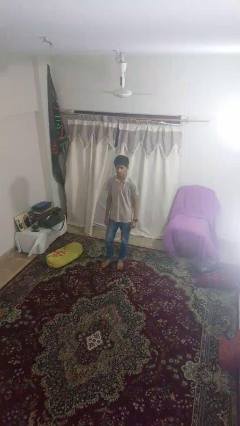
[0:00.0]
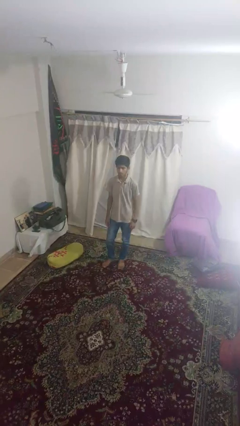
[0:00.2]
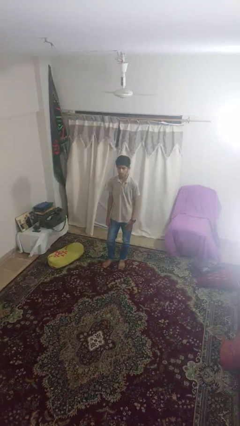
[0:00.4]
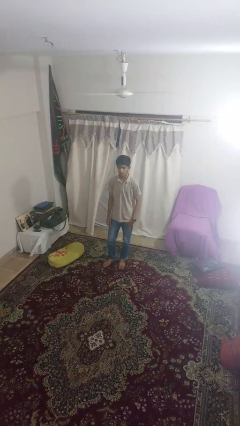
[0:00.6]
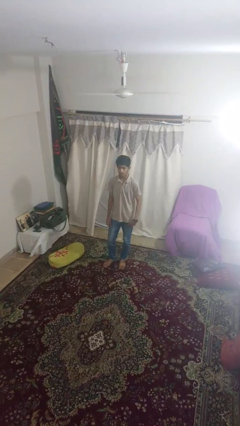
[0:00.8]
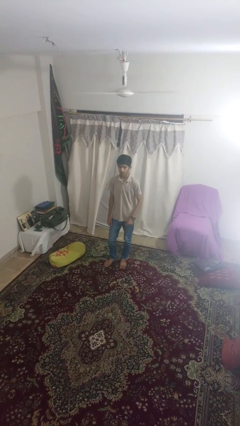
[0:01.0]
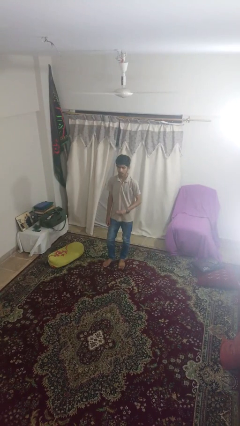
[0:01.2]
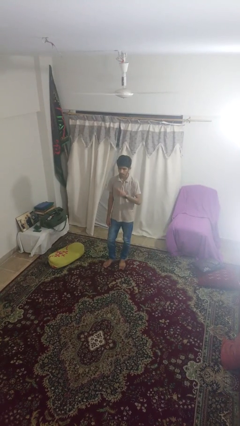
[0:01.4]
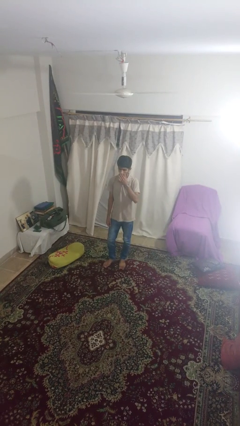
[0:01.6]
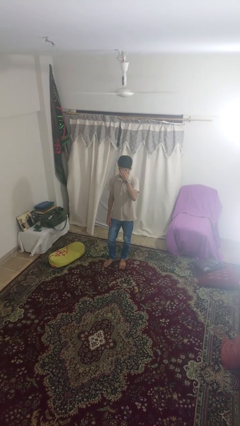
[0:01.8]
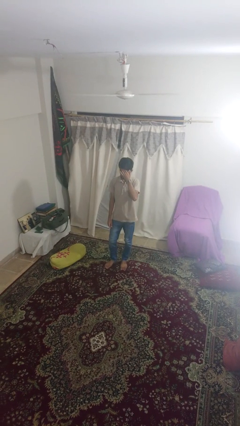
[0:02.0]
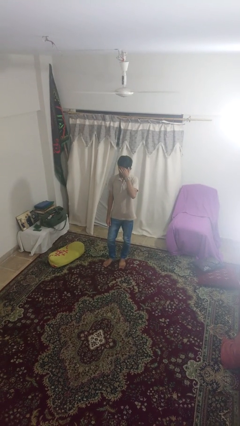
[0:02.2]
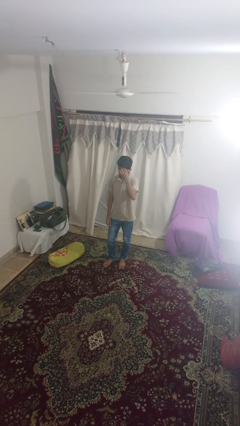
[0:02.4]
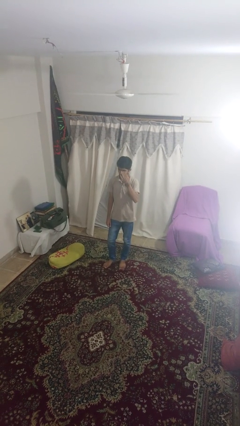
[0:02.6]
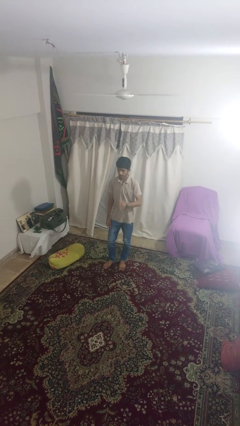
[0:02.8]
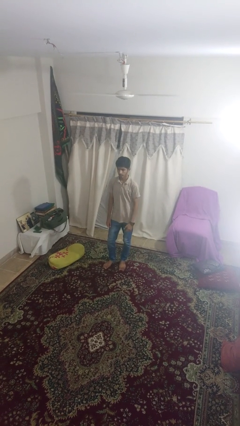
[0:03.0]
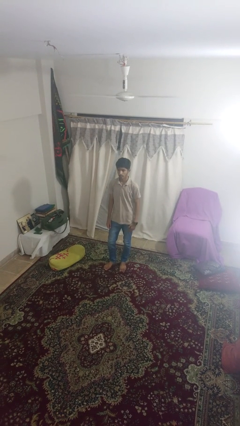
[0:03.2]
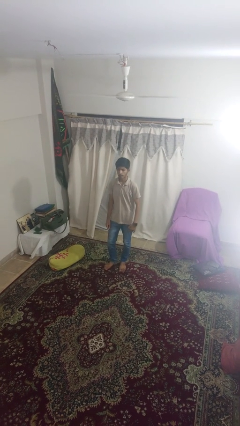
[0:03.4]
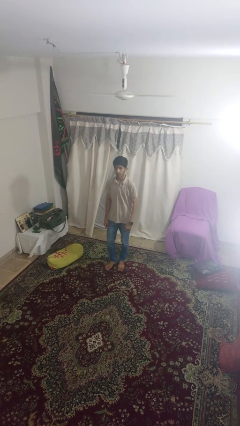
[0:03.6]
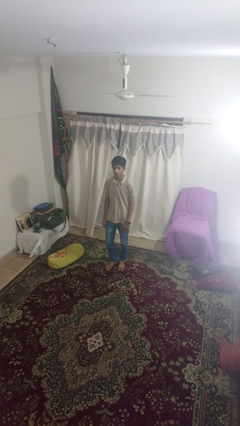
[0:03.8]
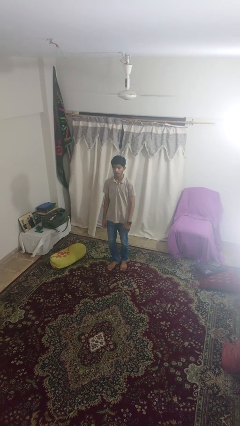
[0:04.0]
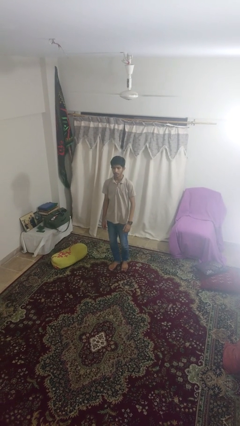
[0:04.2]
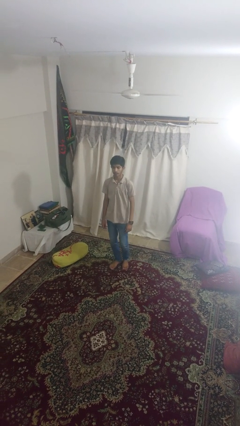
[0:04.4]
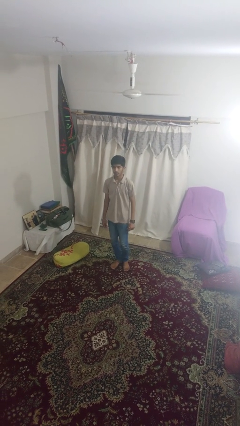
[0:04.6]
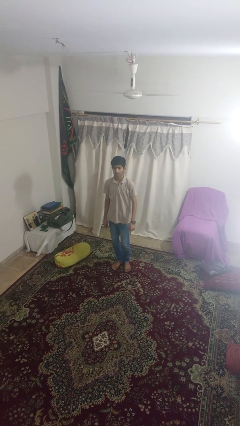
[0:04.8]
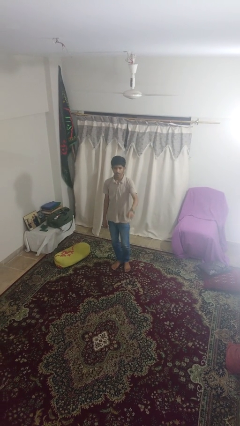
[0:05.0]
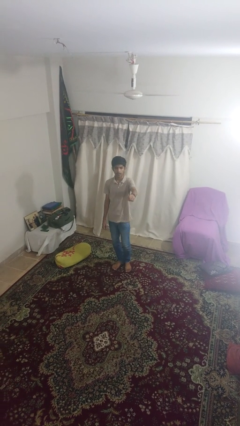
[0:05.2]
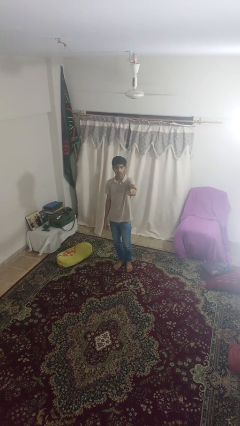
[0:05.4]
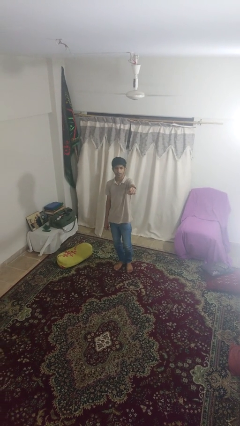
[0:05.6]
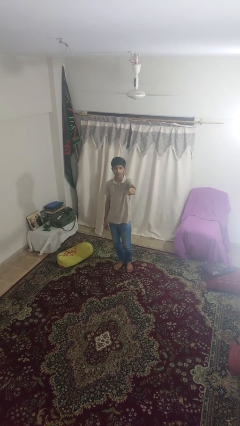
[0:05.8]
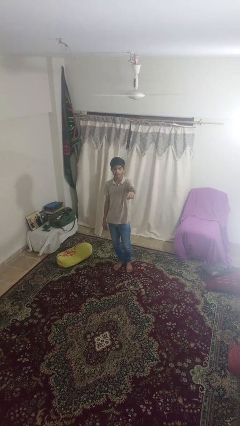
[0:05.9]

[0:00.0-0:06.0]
person points at person

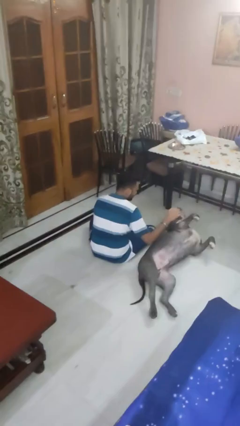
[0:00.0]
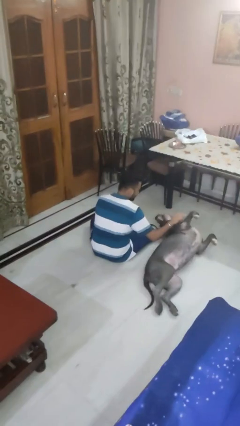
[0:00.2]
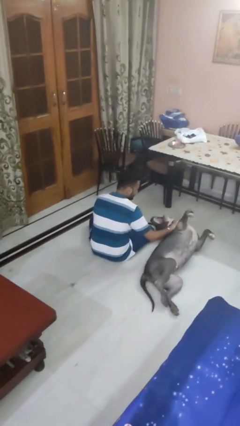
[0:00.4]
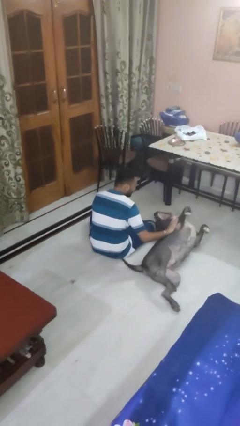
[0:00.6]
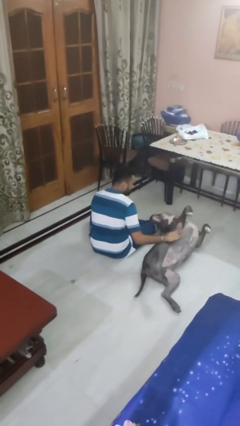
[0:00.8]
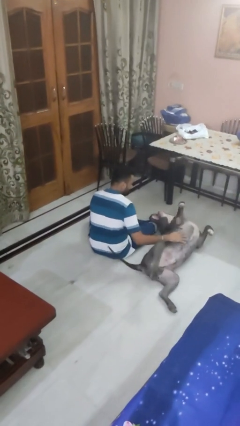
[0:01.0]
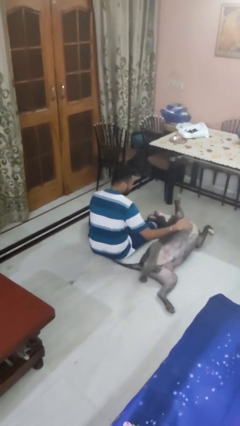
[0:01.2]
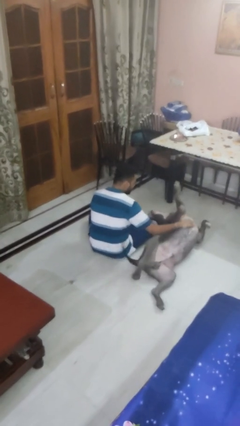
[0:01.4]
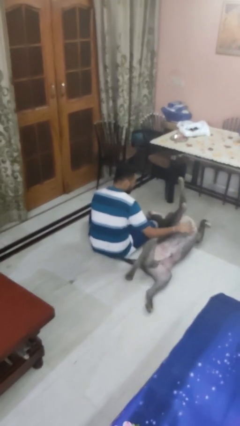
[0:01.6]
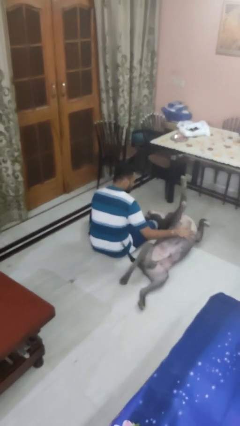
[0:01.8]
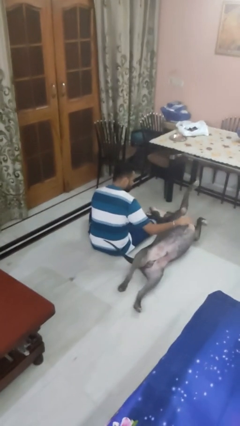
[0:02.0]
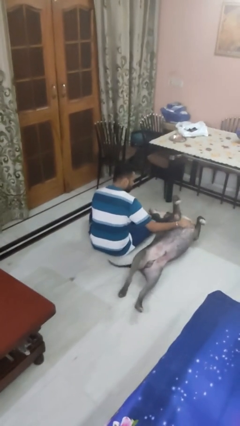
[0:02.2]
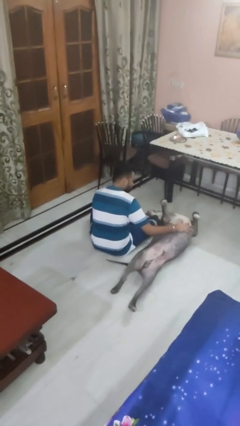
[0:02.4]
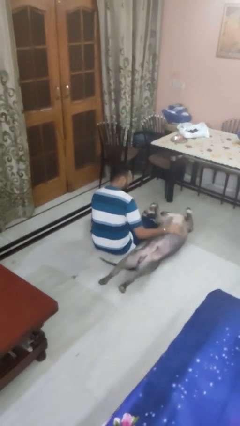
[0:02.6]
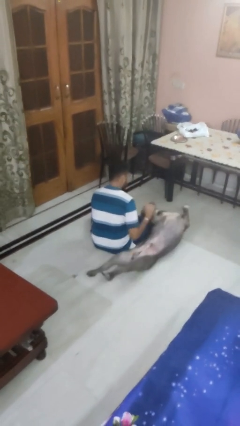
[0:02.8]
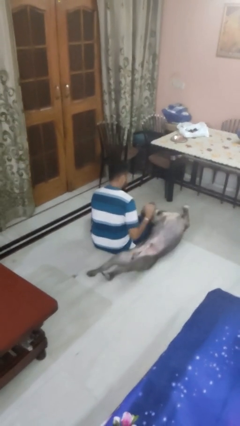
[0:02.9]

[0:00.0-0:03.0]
person pets dog

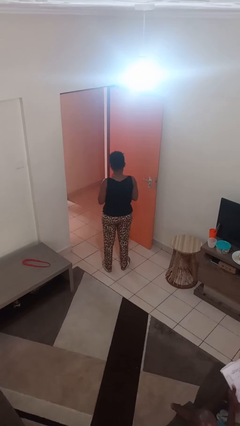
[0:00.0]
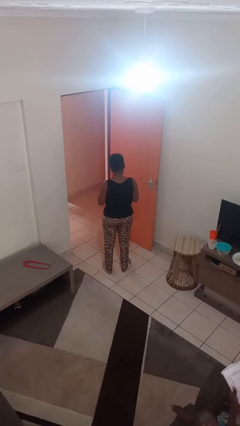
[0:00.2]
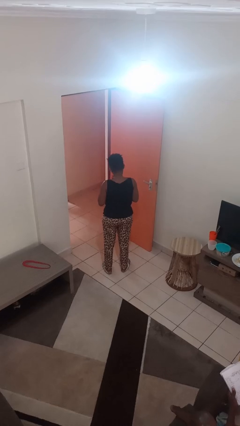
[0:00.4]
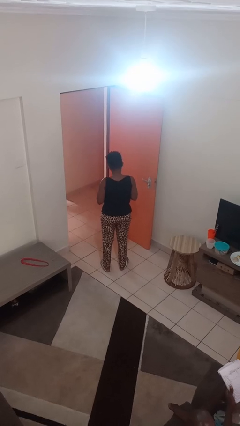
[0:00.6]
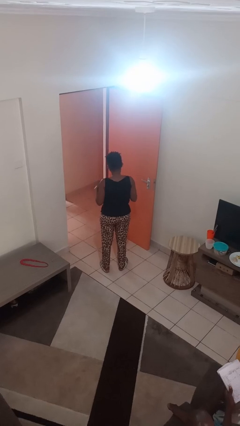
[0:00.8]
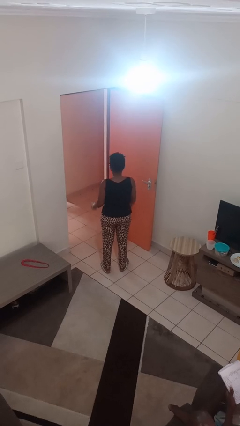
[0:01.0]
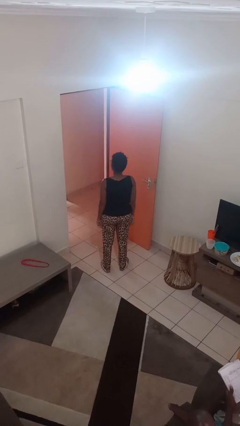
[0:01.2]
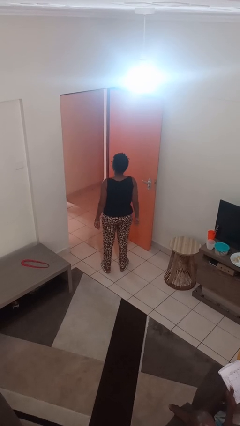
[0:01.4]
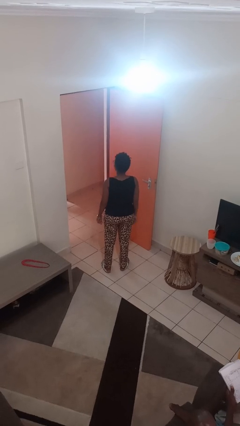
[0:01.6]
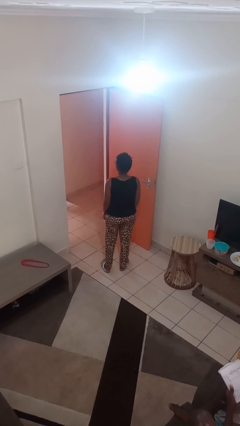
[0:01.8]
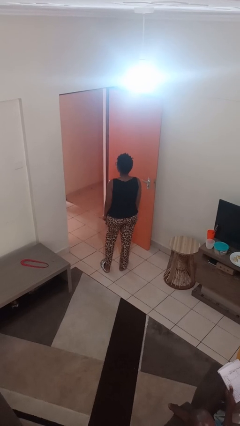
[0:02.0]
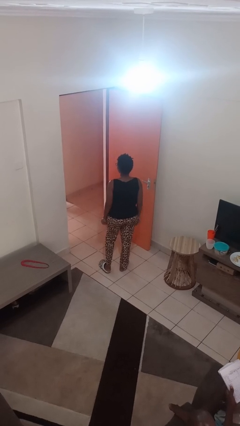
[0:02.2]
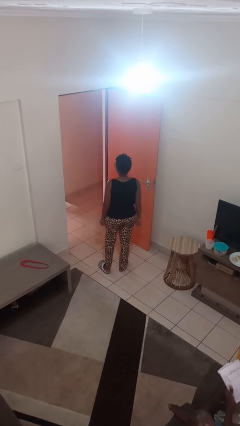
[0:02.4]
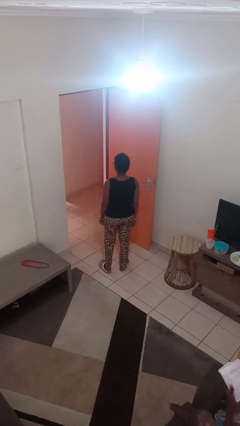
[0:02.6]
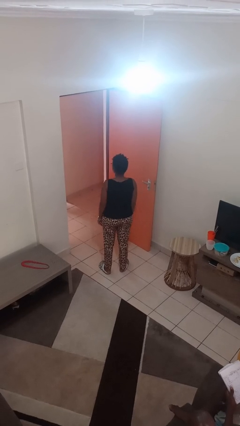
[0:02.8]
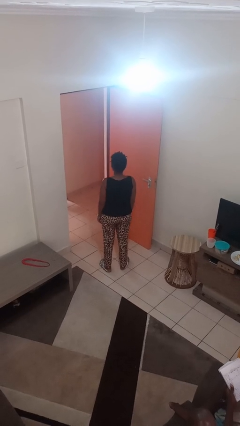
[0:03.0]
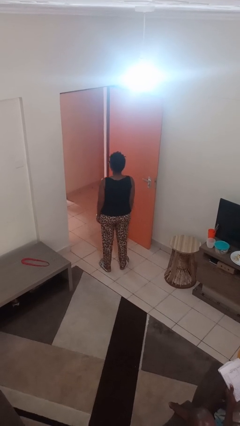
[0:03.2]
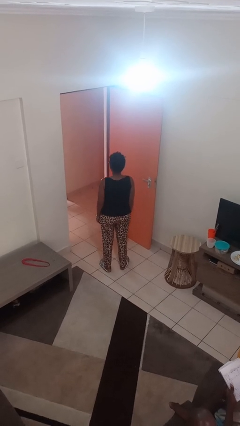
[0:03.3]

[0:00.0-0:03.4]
person takes off ring

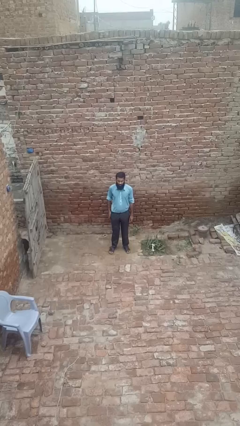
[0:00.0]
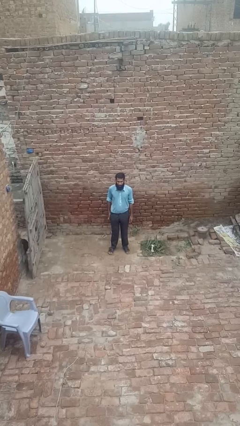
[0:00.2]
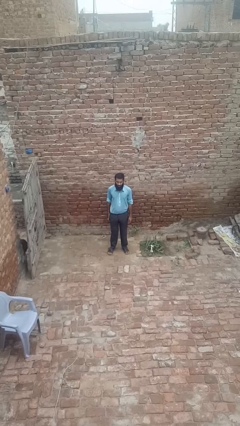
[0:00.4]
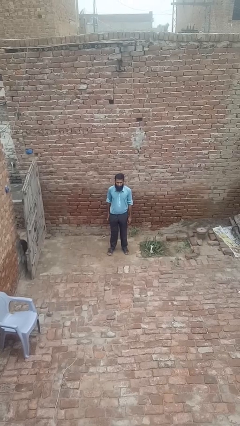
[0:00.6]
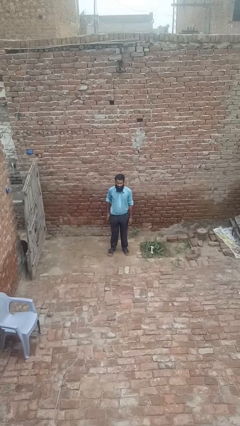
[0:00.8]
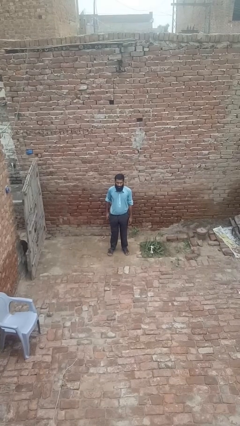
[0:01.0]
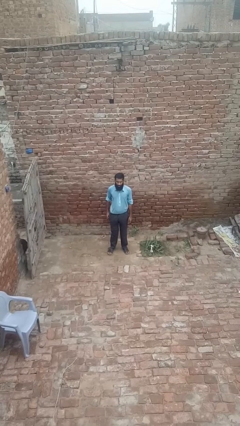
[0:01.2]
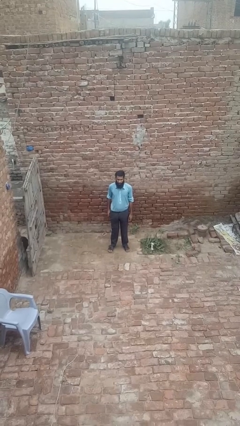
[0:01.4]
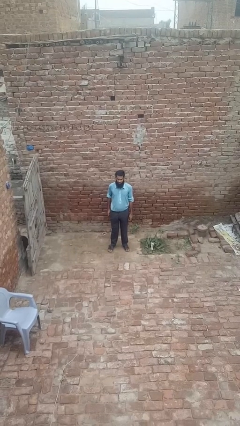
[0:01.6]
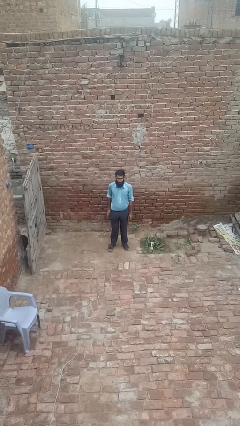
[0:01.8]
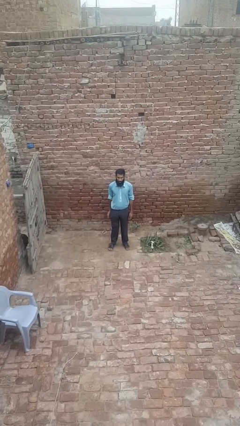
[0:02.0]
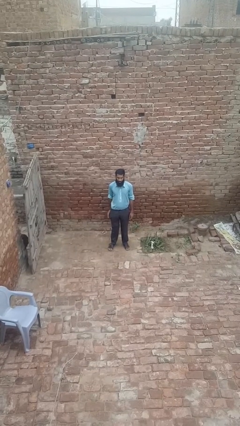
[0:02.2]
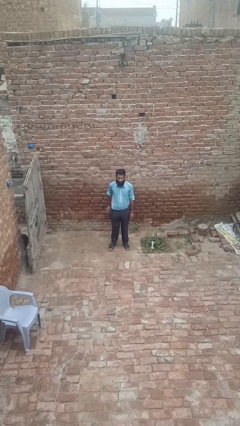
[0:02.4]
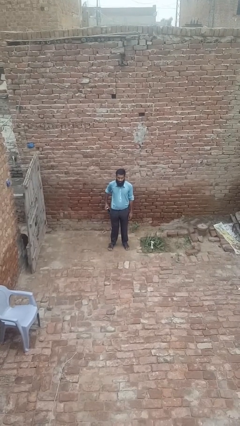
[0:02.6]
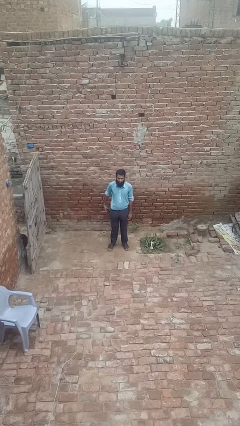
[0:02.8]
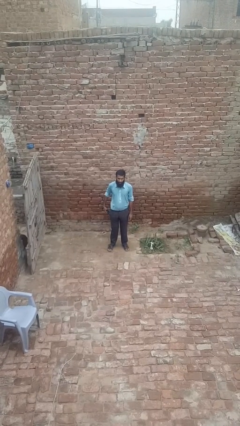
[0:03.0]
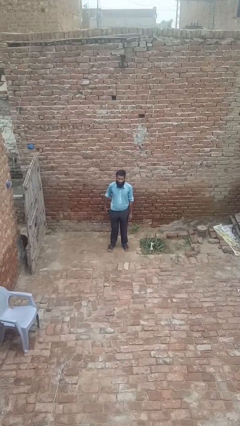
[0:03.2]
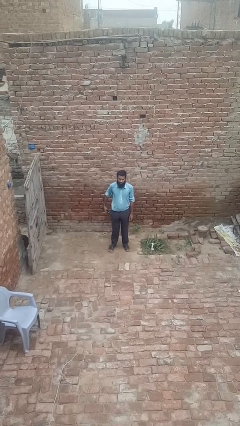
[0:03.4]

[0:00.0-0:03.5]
person takes phone from pocket

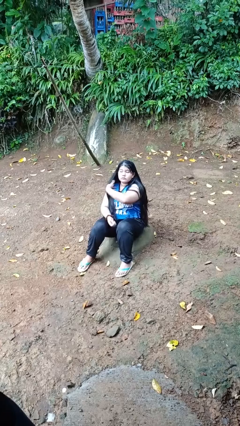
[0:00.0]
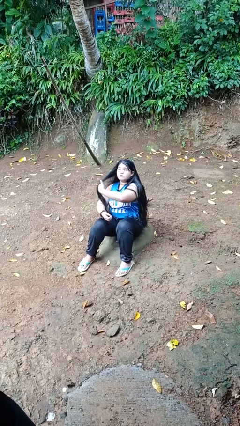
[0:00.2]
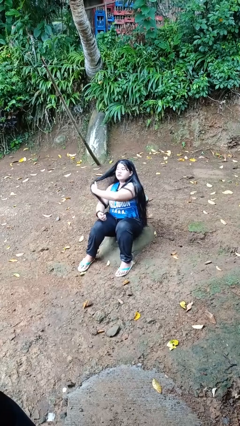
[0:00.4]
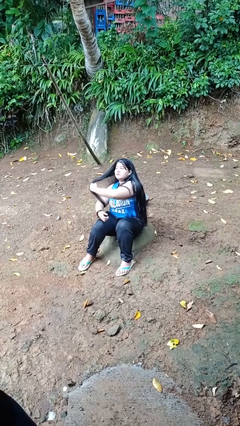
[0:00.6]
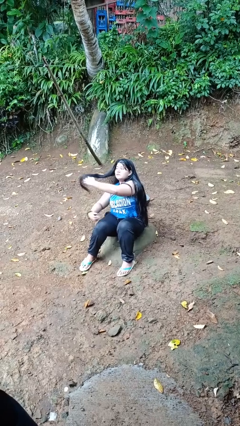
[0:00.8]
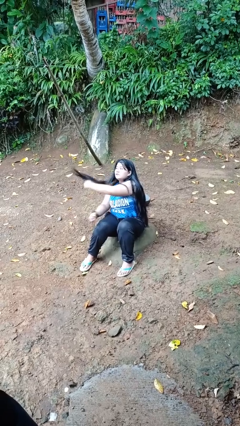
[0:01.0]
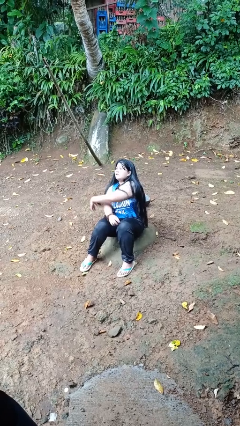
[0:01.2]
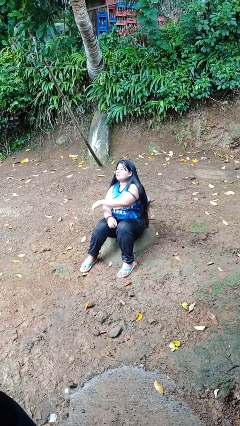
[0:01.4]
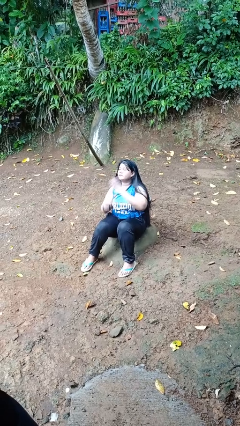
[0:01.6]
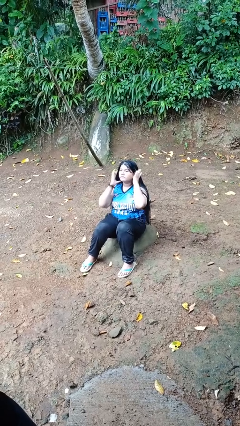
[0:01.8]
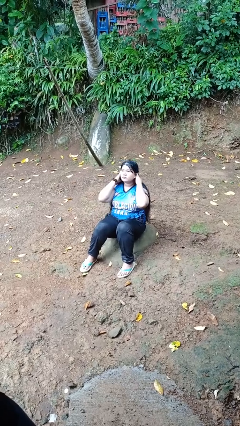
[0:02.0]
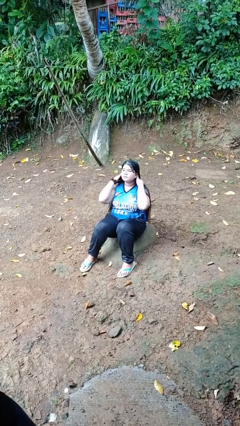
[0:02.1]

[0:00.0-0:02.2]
person strokes hair
